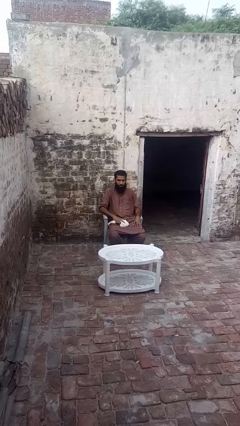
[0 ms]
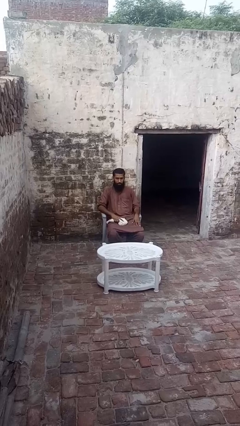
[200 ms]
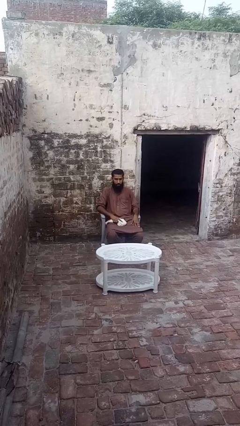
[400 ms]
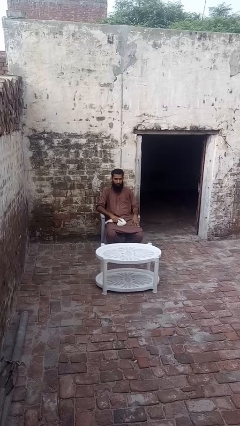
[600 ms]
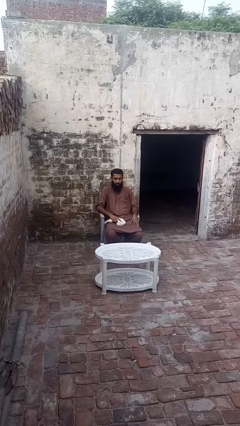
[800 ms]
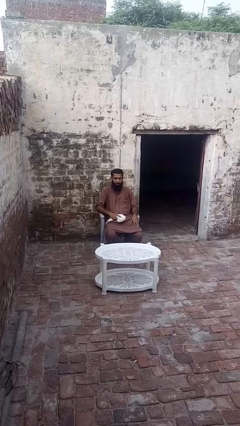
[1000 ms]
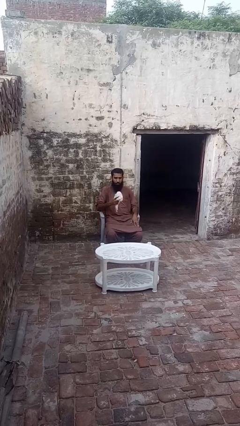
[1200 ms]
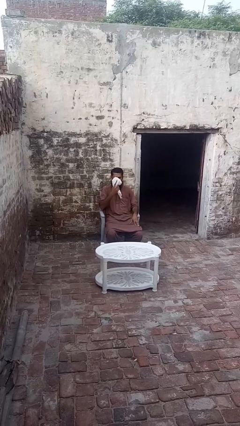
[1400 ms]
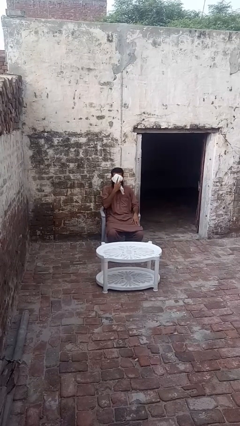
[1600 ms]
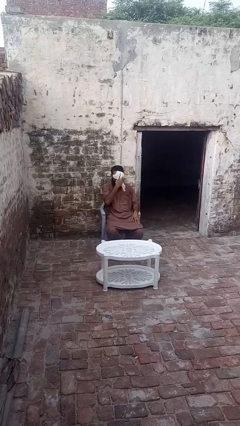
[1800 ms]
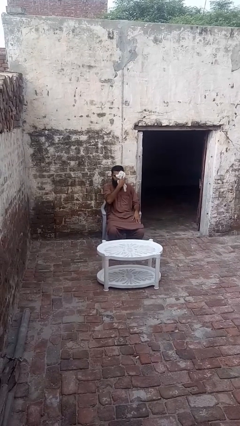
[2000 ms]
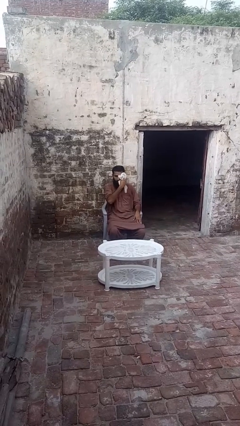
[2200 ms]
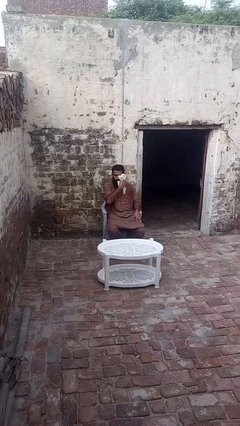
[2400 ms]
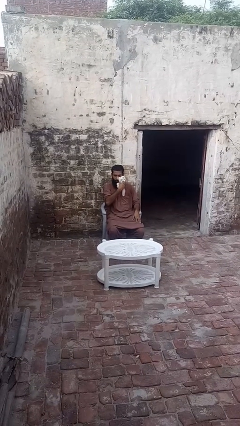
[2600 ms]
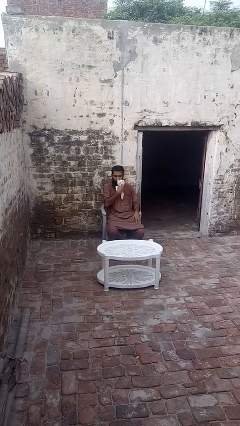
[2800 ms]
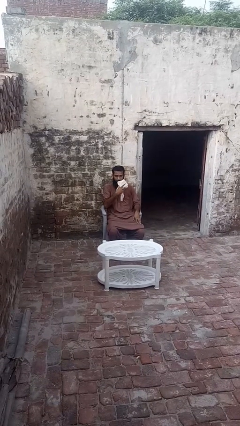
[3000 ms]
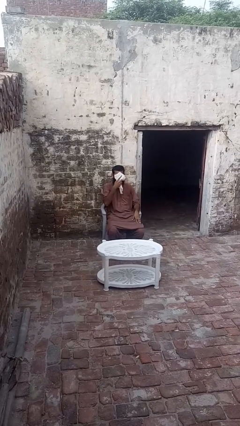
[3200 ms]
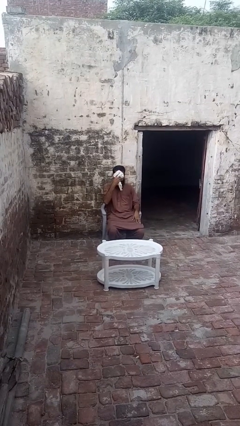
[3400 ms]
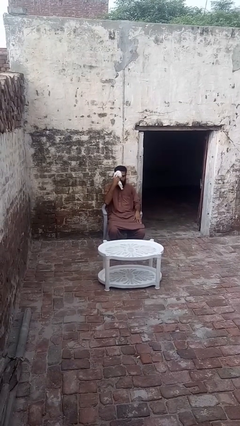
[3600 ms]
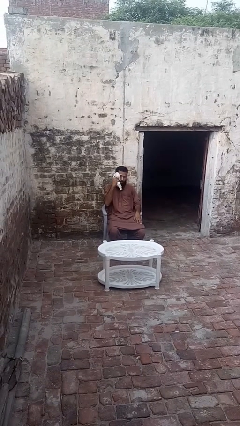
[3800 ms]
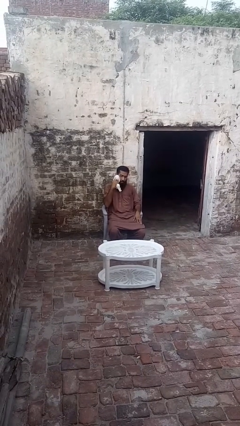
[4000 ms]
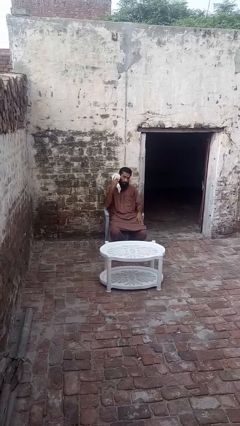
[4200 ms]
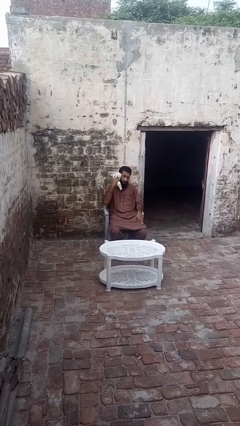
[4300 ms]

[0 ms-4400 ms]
person wipes mouth with napkin

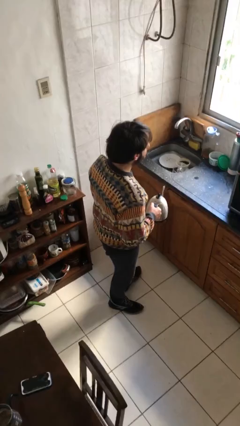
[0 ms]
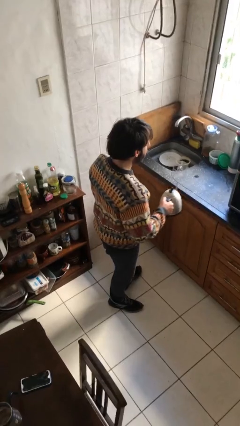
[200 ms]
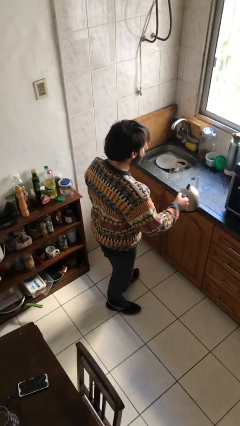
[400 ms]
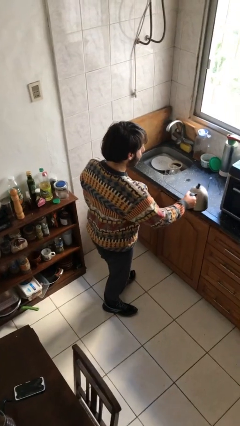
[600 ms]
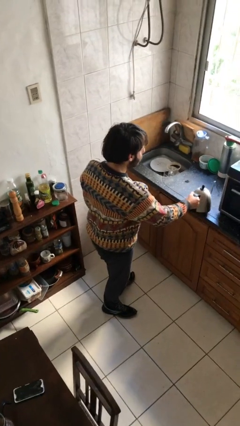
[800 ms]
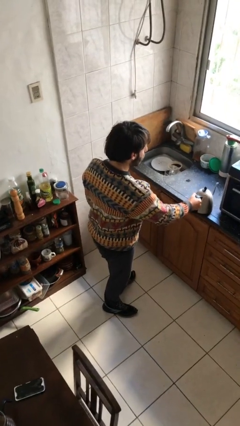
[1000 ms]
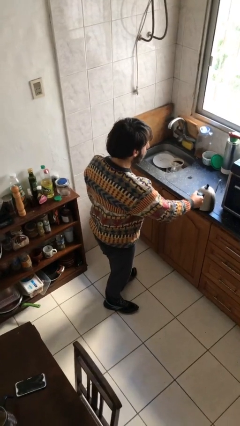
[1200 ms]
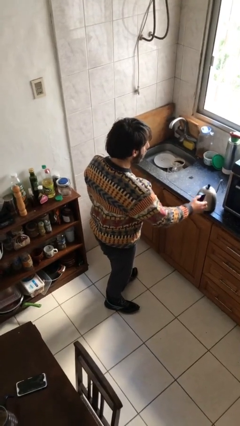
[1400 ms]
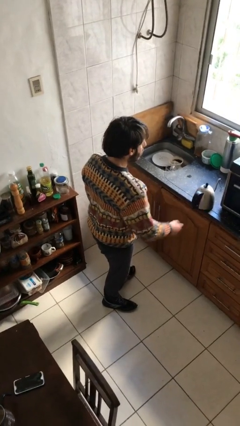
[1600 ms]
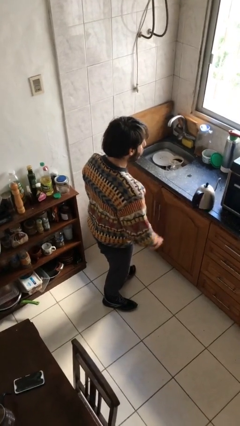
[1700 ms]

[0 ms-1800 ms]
person puts down object on countertop

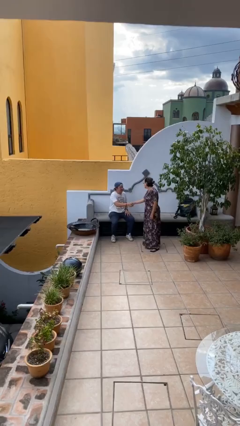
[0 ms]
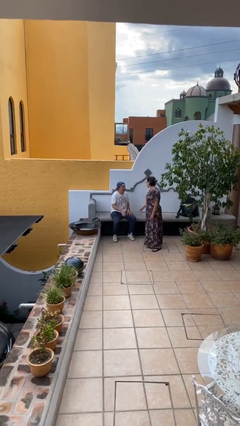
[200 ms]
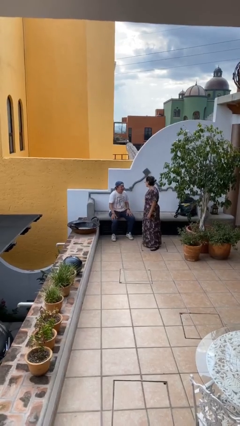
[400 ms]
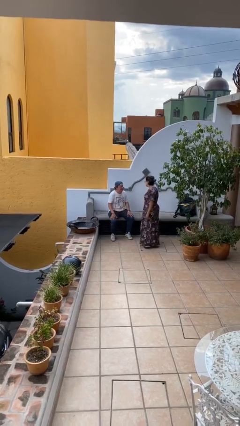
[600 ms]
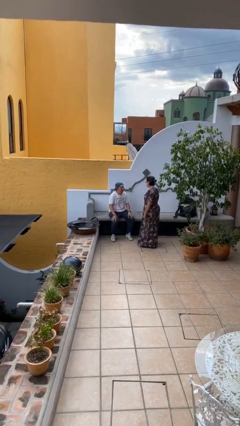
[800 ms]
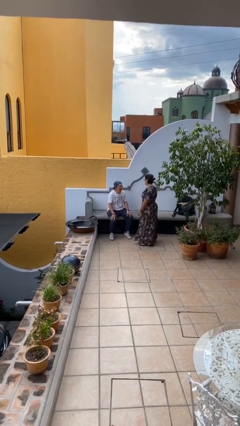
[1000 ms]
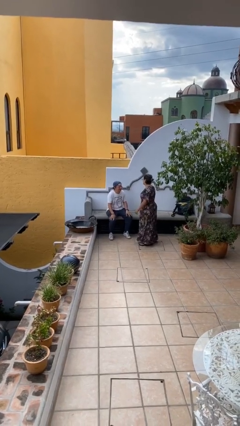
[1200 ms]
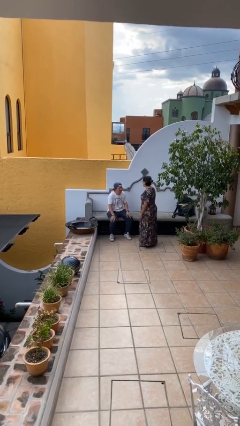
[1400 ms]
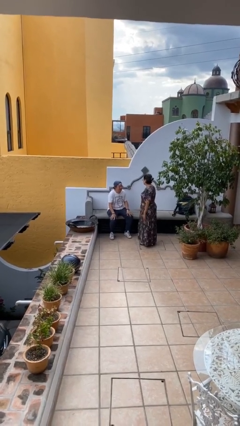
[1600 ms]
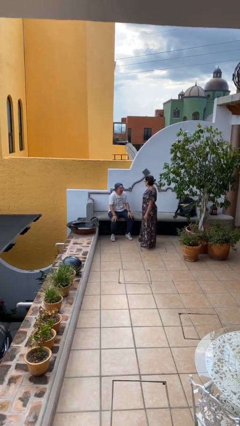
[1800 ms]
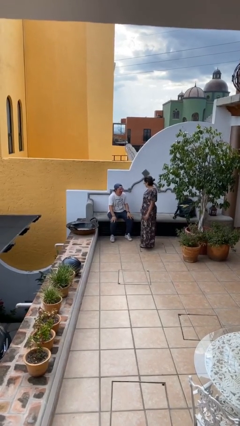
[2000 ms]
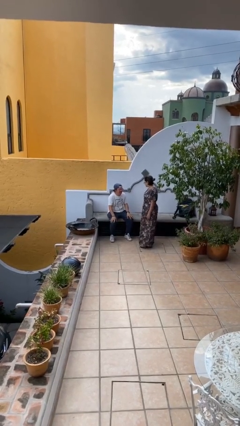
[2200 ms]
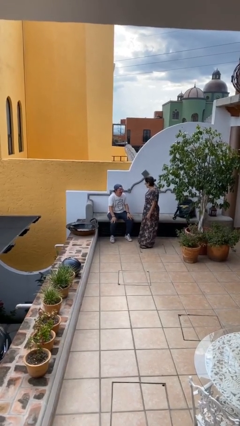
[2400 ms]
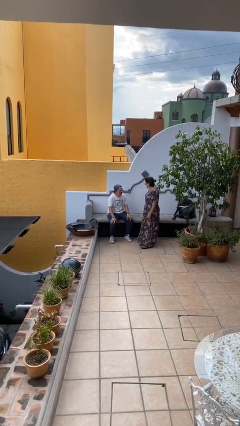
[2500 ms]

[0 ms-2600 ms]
person talks to person

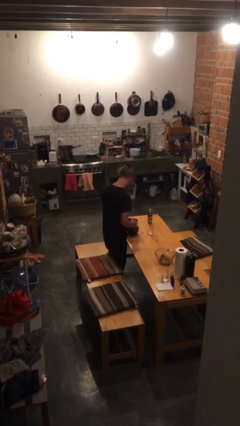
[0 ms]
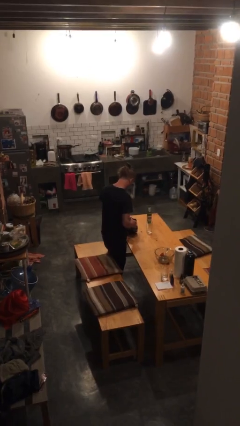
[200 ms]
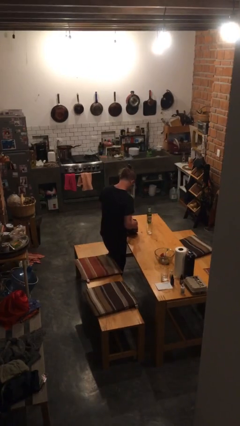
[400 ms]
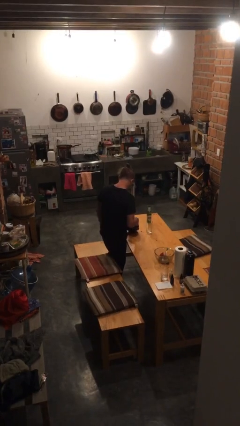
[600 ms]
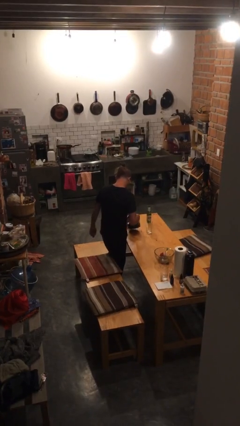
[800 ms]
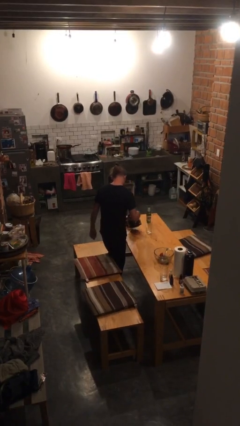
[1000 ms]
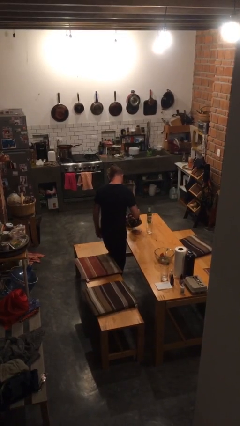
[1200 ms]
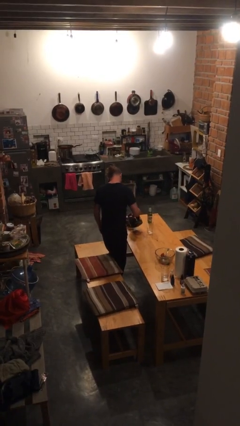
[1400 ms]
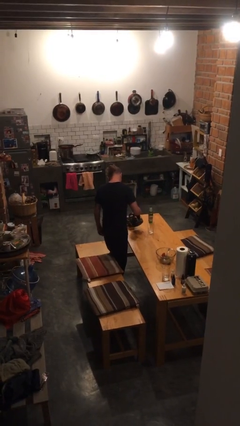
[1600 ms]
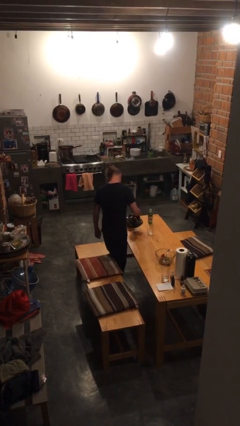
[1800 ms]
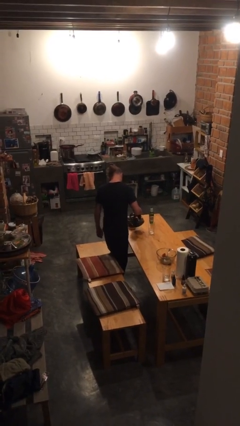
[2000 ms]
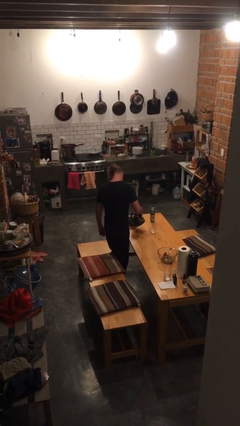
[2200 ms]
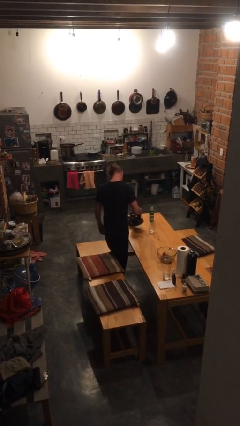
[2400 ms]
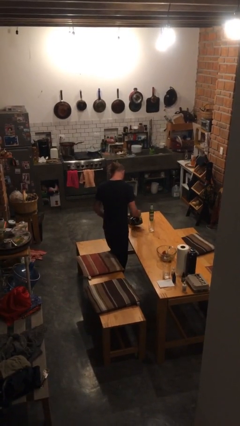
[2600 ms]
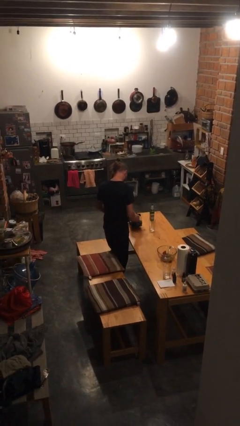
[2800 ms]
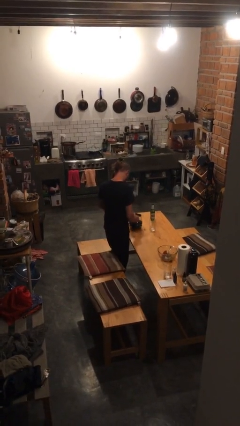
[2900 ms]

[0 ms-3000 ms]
person pours coffee into mug

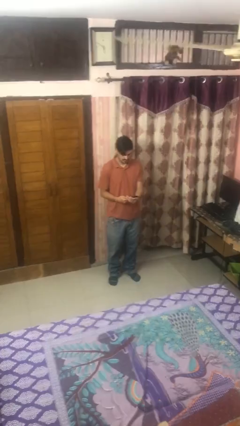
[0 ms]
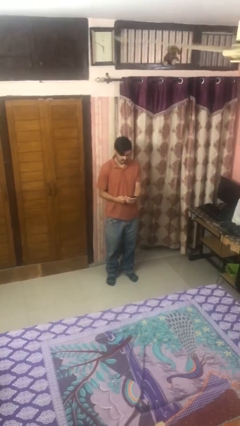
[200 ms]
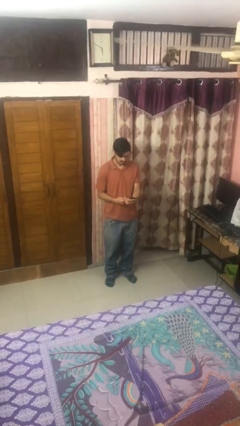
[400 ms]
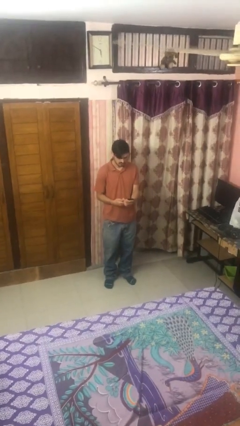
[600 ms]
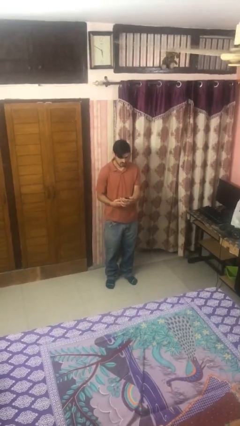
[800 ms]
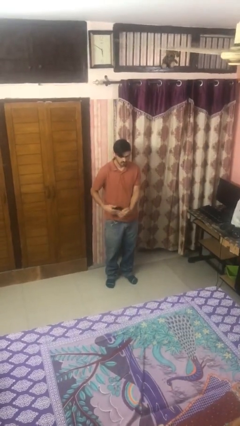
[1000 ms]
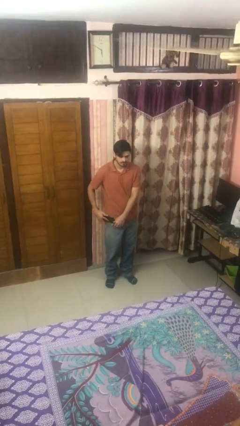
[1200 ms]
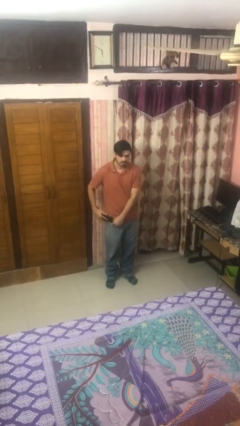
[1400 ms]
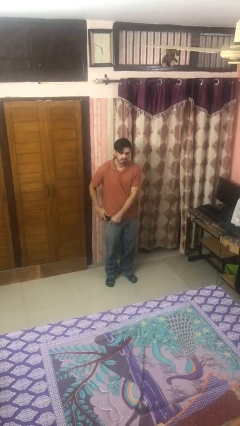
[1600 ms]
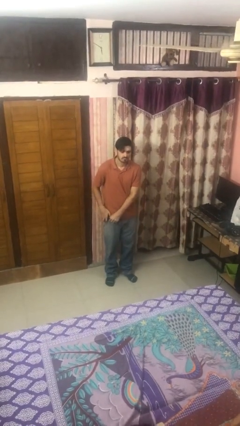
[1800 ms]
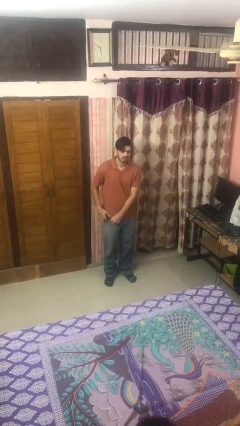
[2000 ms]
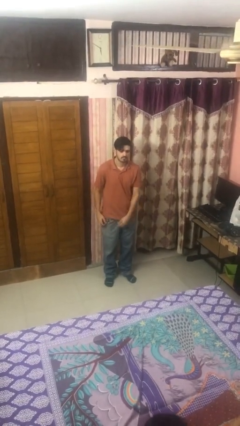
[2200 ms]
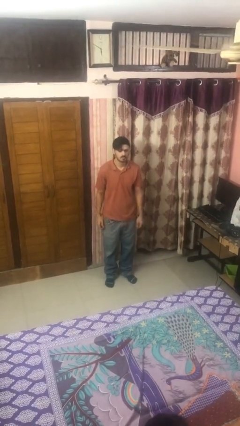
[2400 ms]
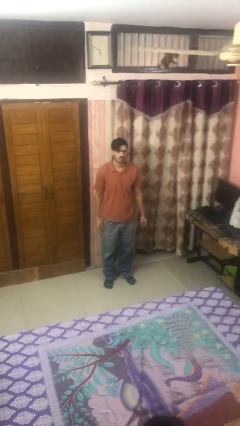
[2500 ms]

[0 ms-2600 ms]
person puts phone into pocket

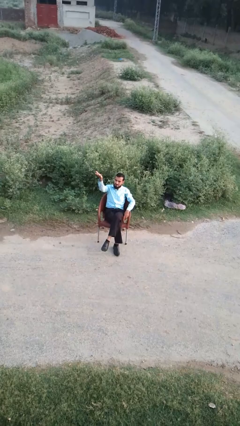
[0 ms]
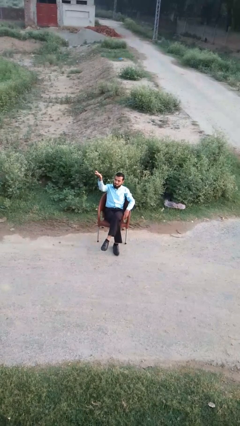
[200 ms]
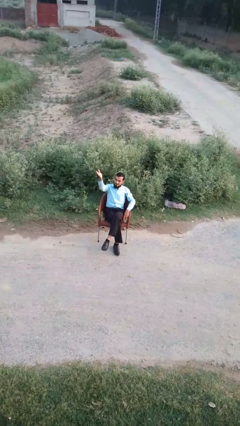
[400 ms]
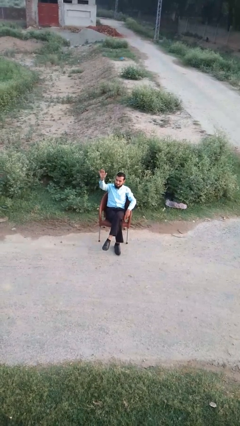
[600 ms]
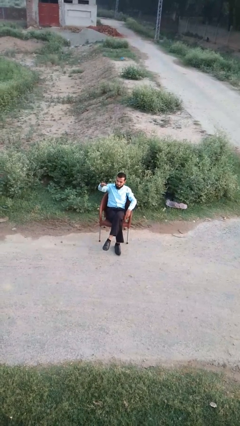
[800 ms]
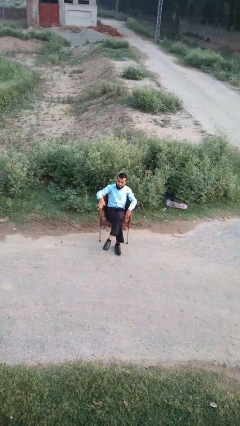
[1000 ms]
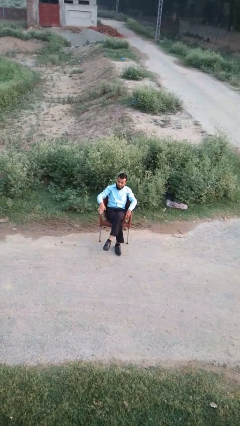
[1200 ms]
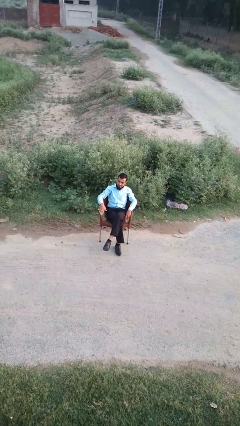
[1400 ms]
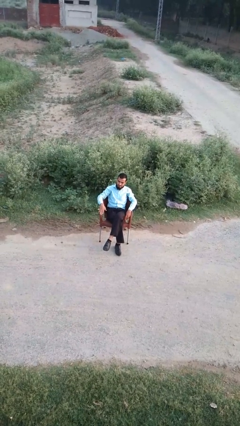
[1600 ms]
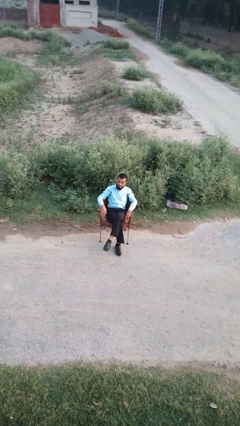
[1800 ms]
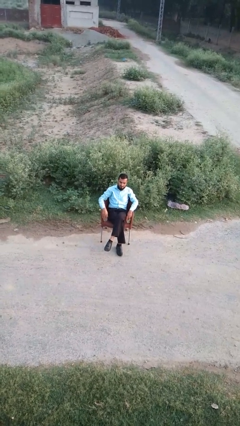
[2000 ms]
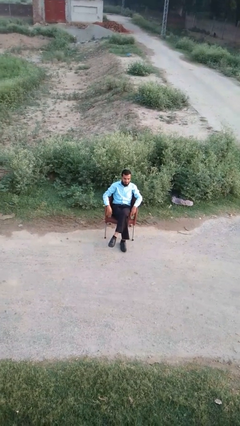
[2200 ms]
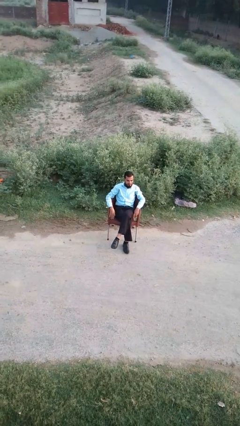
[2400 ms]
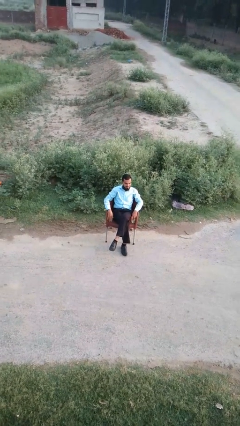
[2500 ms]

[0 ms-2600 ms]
person gestures swipe down

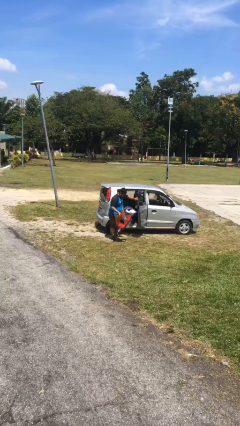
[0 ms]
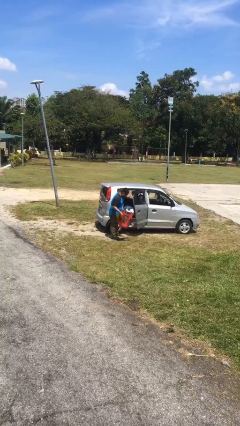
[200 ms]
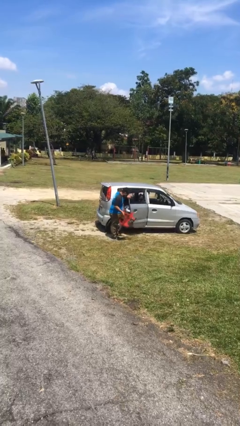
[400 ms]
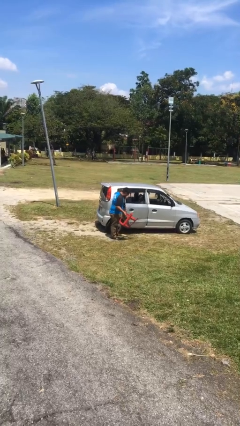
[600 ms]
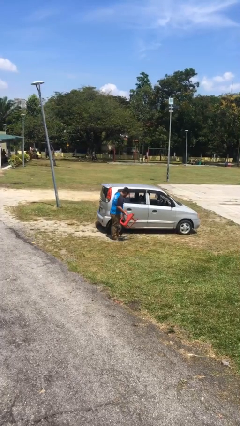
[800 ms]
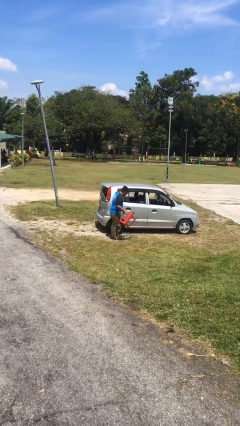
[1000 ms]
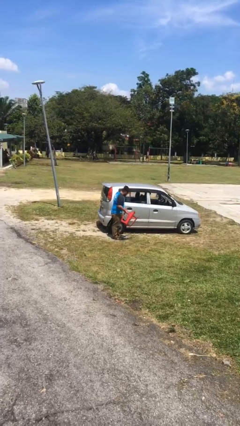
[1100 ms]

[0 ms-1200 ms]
person closes car door
